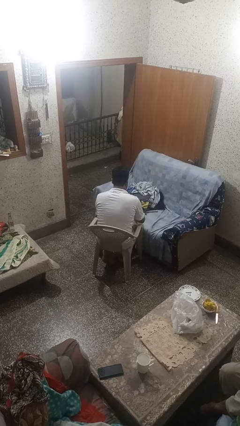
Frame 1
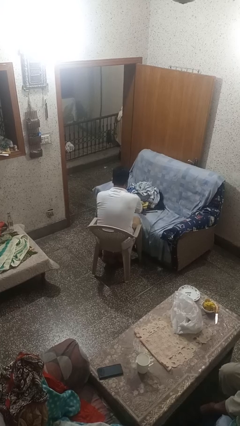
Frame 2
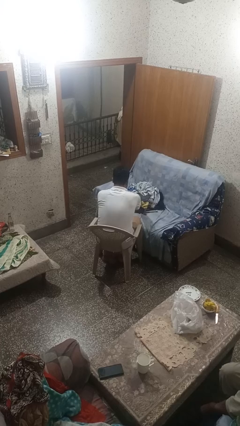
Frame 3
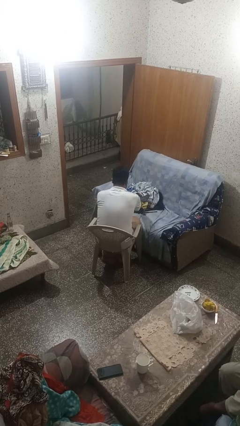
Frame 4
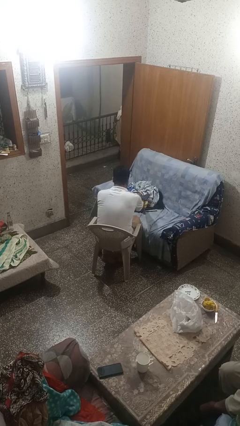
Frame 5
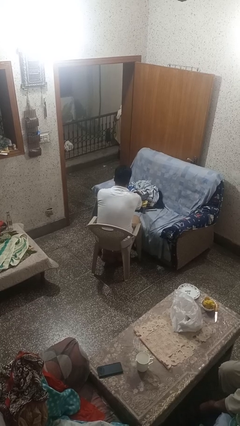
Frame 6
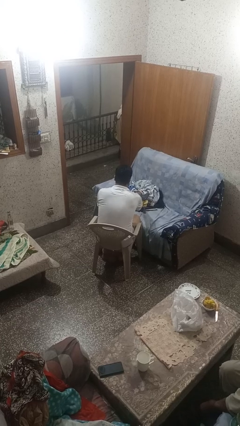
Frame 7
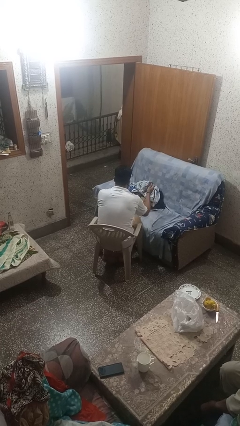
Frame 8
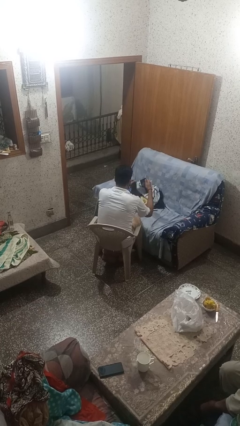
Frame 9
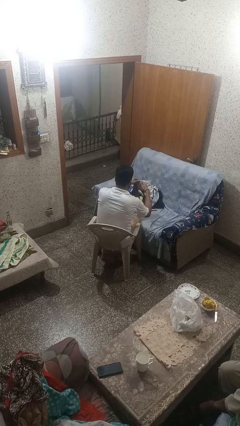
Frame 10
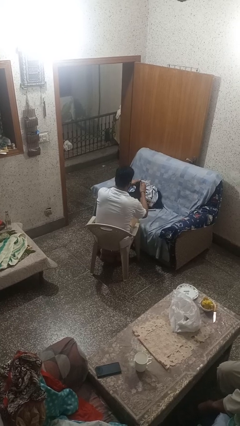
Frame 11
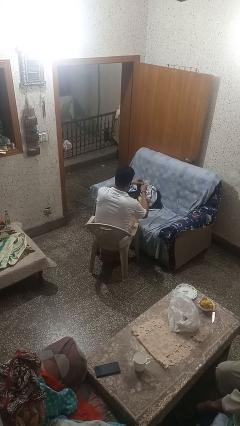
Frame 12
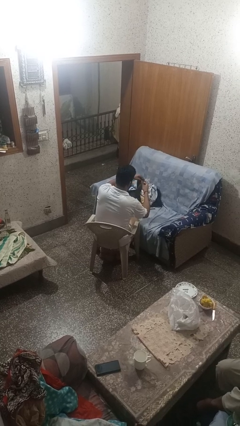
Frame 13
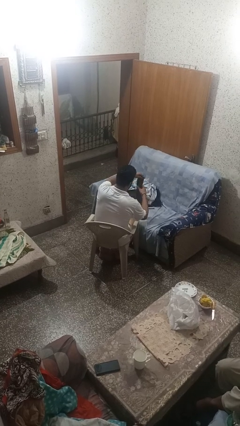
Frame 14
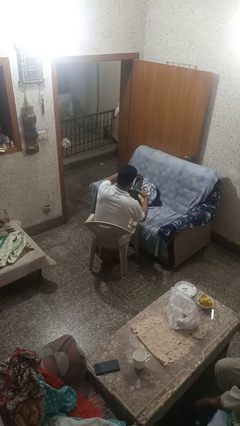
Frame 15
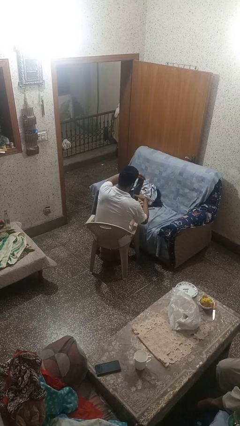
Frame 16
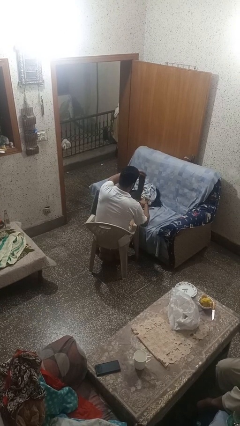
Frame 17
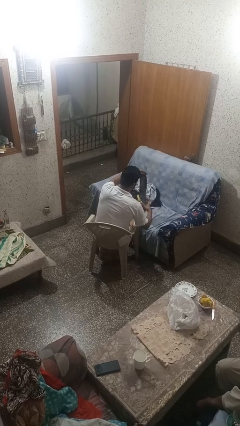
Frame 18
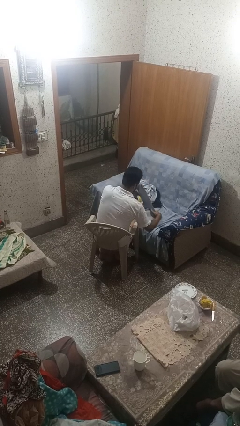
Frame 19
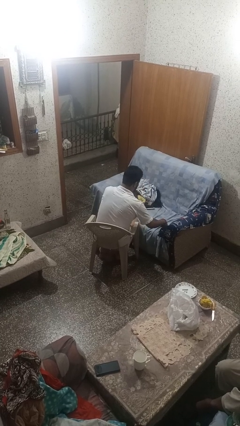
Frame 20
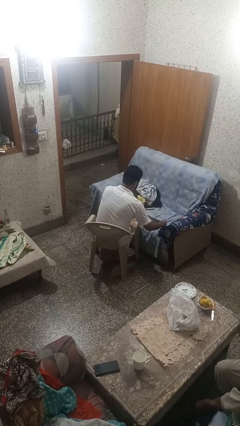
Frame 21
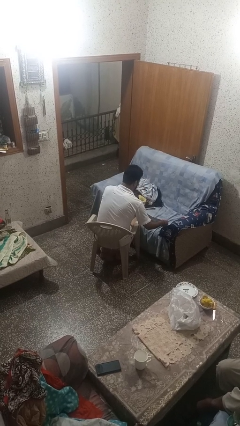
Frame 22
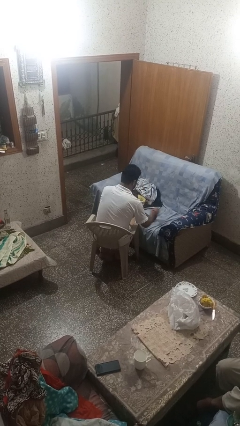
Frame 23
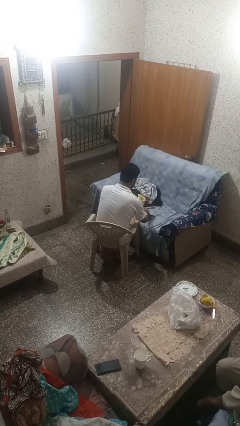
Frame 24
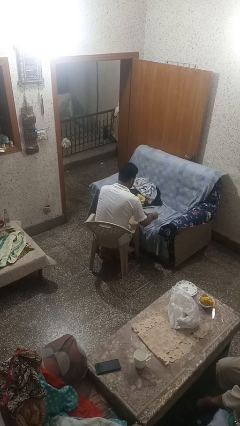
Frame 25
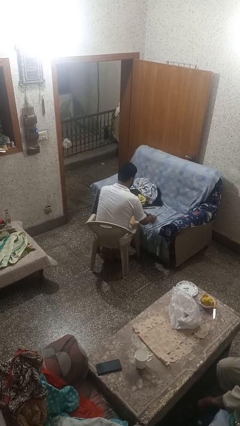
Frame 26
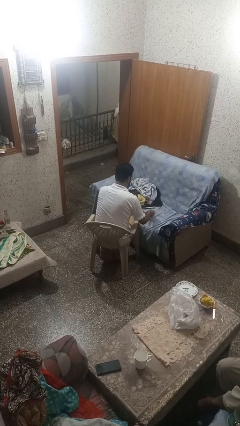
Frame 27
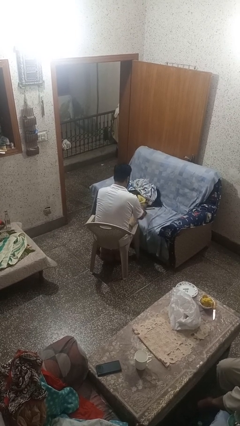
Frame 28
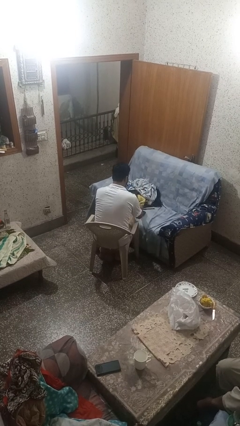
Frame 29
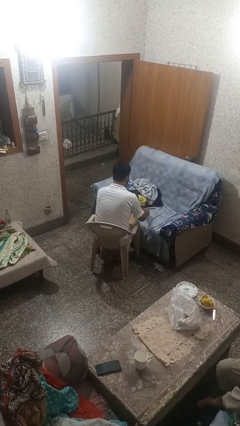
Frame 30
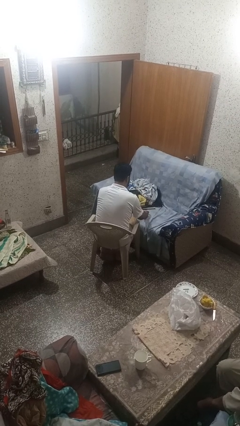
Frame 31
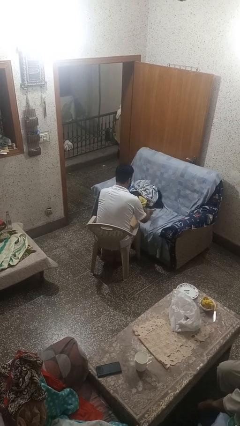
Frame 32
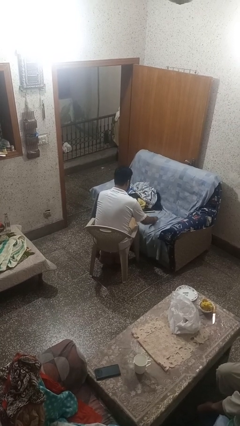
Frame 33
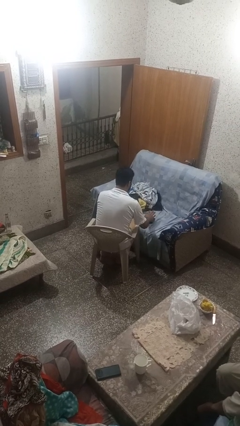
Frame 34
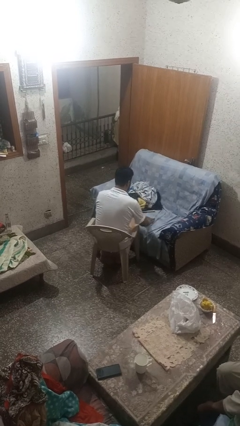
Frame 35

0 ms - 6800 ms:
person folds socks

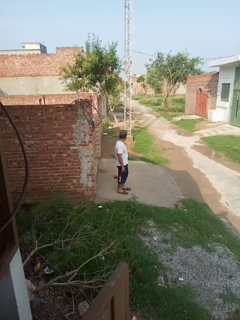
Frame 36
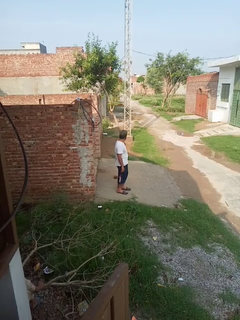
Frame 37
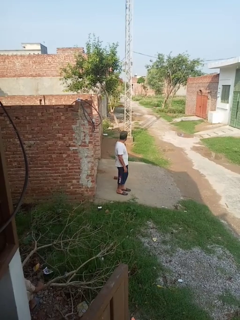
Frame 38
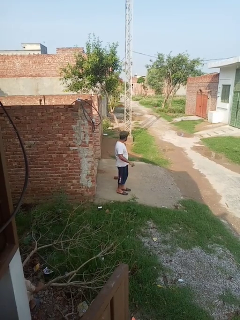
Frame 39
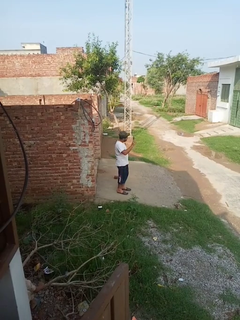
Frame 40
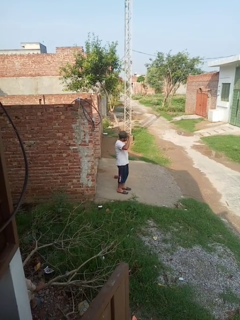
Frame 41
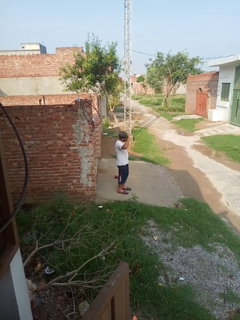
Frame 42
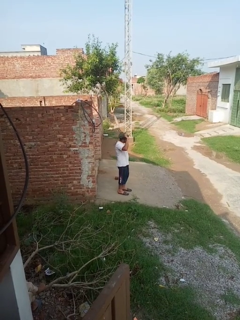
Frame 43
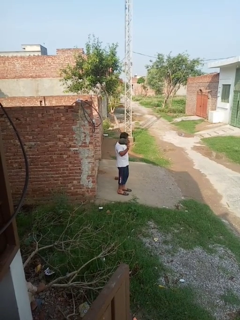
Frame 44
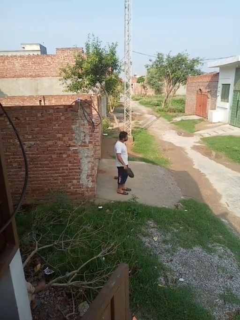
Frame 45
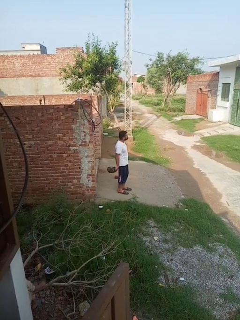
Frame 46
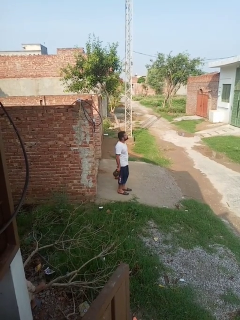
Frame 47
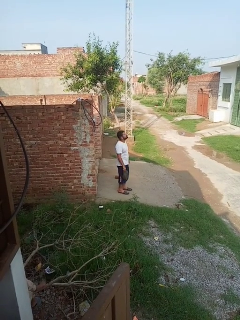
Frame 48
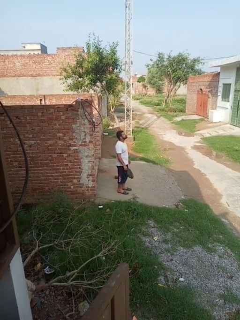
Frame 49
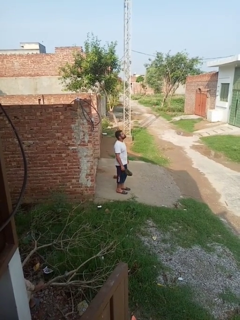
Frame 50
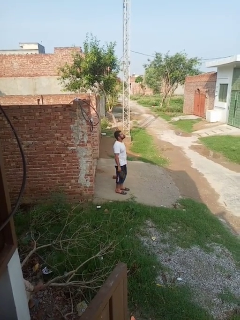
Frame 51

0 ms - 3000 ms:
person takes off hat

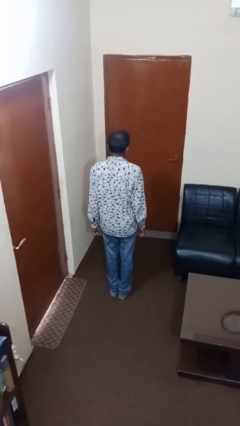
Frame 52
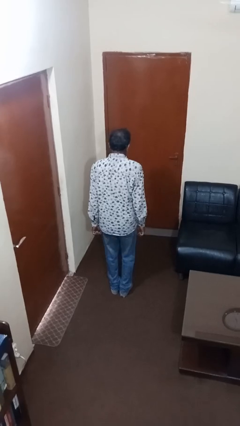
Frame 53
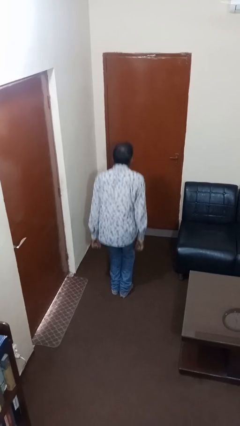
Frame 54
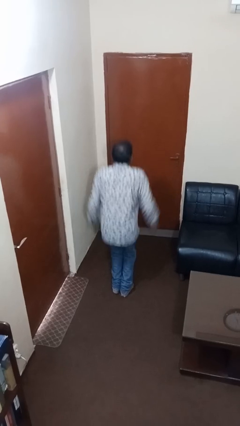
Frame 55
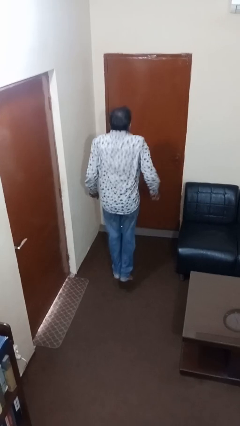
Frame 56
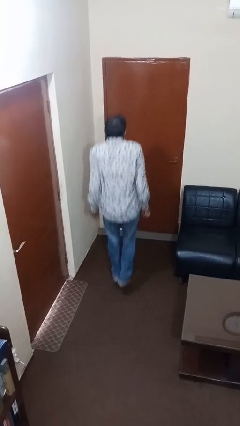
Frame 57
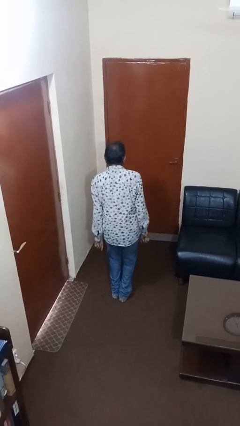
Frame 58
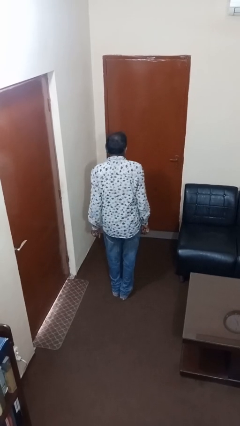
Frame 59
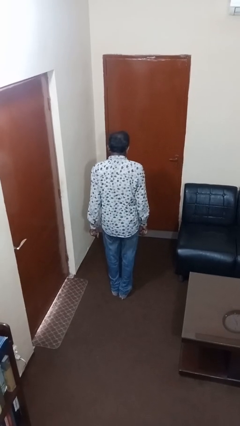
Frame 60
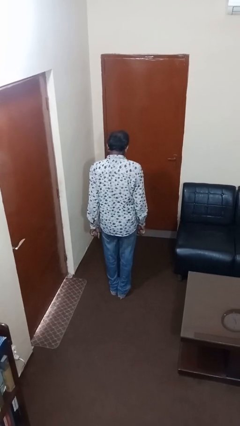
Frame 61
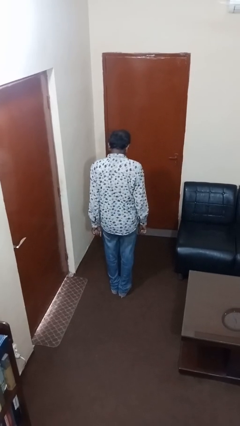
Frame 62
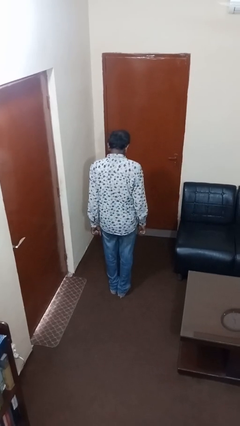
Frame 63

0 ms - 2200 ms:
person jumps

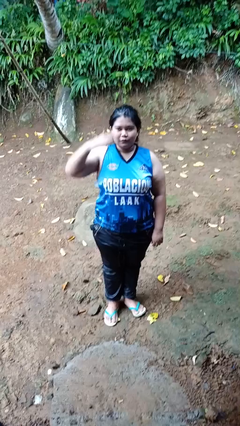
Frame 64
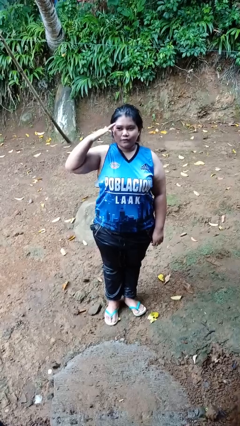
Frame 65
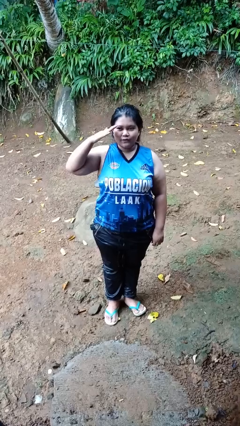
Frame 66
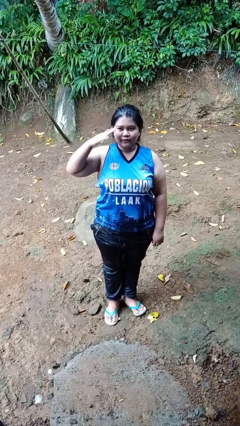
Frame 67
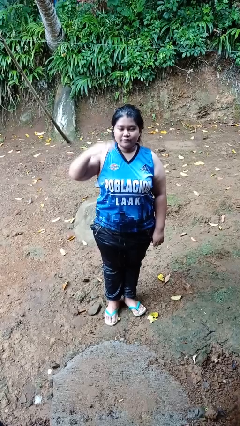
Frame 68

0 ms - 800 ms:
person salutes

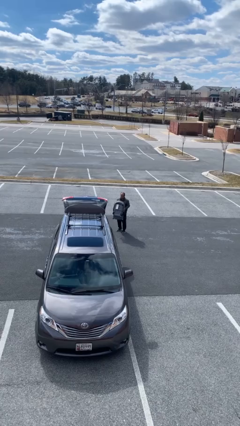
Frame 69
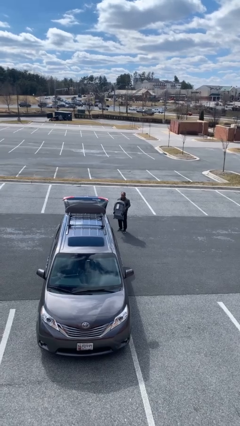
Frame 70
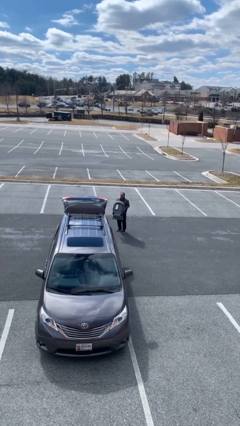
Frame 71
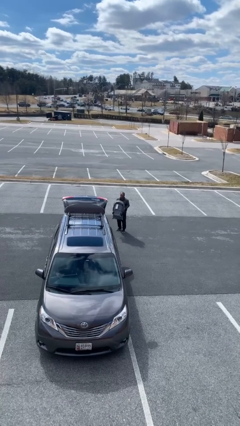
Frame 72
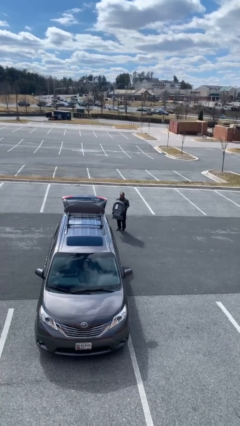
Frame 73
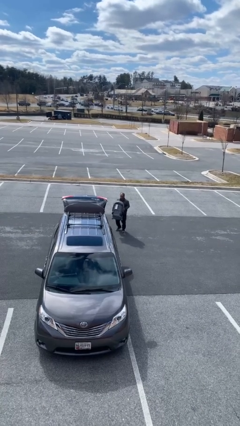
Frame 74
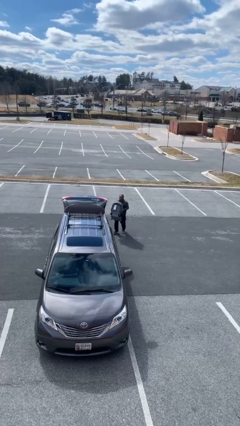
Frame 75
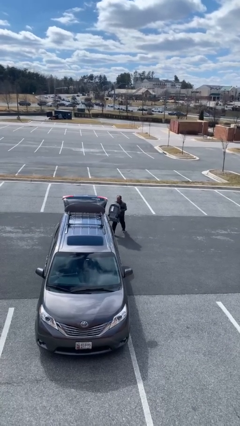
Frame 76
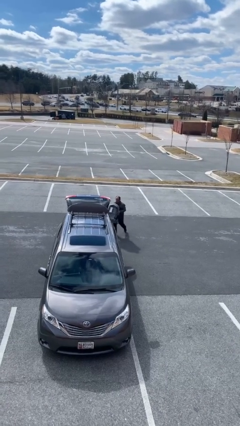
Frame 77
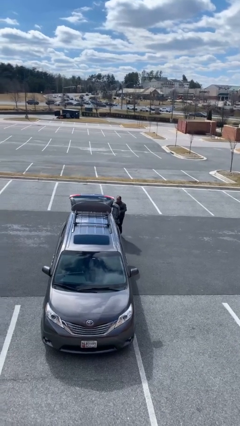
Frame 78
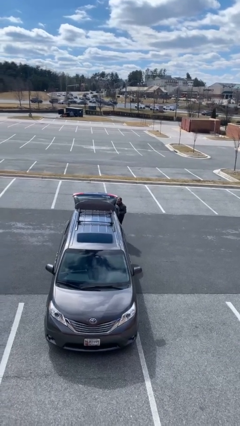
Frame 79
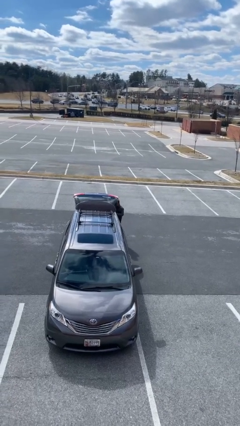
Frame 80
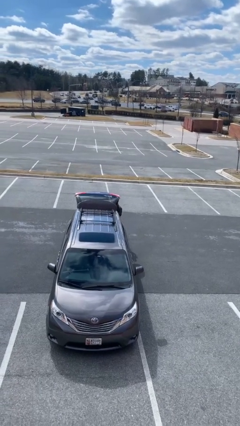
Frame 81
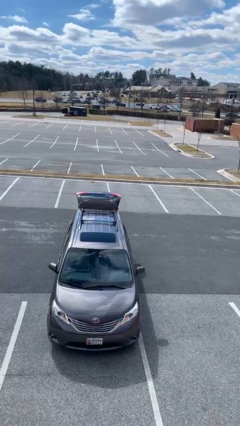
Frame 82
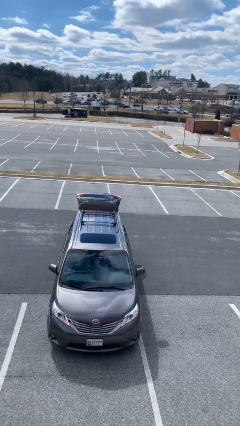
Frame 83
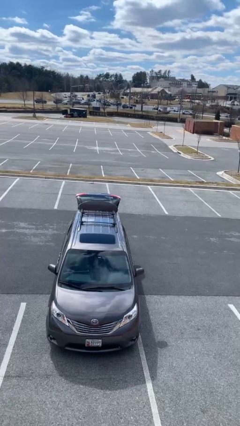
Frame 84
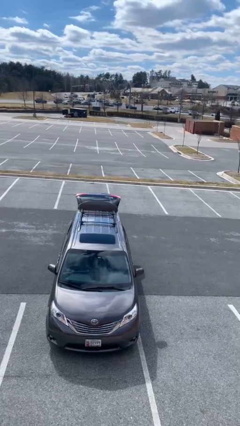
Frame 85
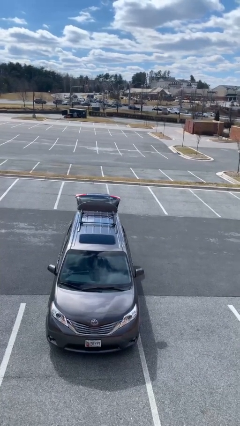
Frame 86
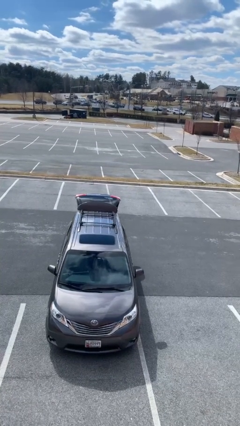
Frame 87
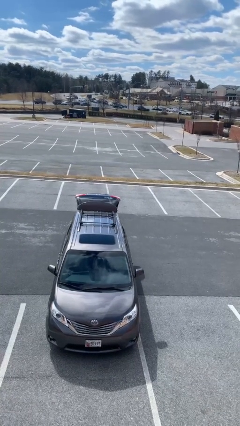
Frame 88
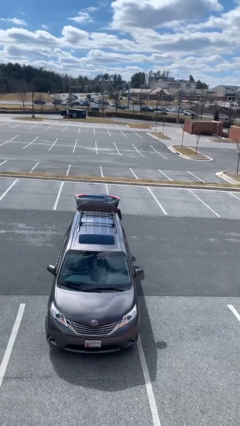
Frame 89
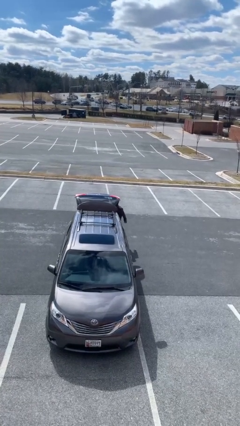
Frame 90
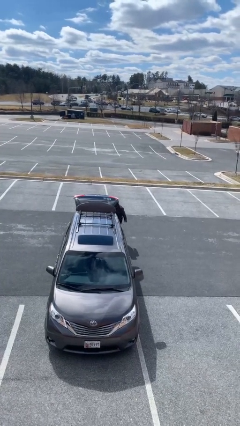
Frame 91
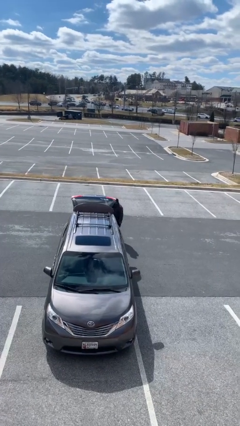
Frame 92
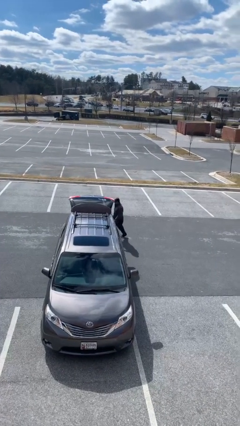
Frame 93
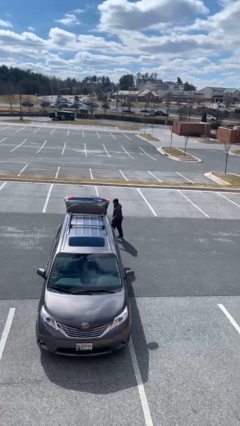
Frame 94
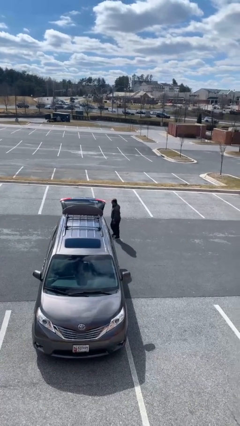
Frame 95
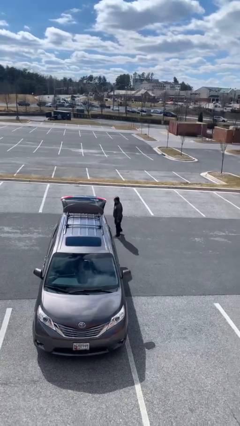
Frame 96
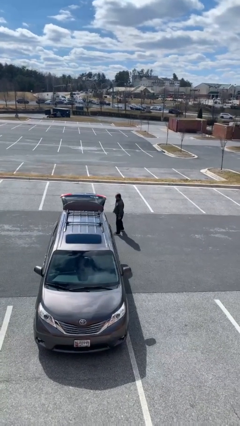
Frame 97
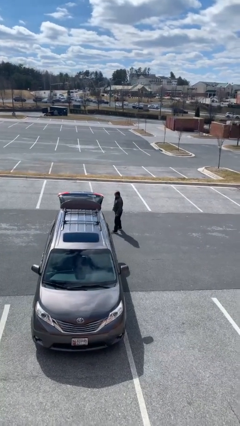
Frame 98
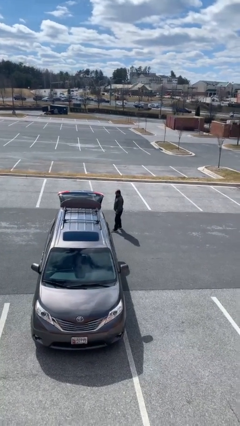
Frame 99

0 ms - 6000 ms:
person loads car
